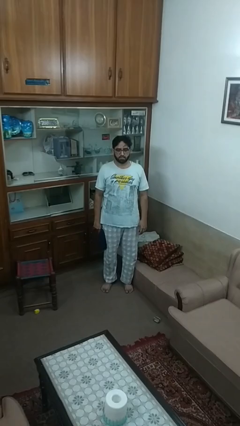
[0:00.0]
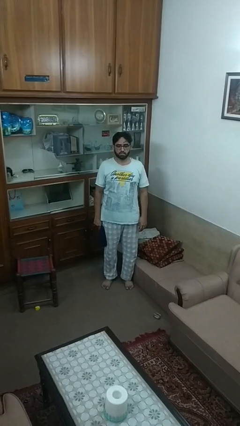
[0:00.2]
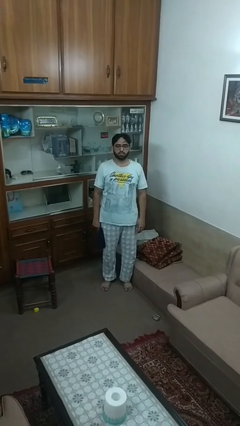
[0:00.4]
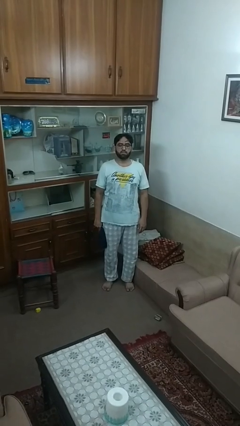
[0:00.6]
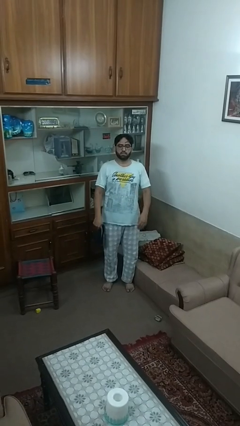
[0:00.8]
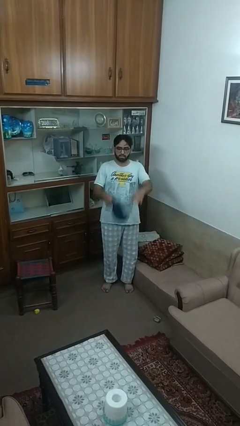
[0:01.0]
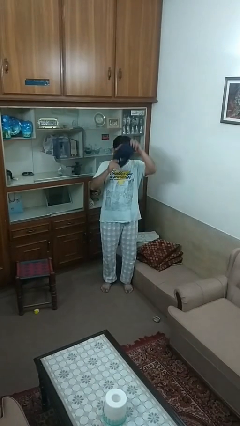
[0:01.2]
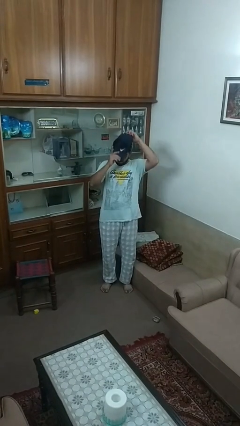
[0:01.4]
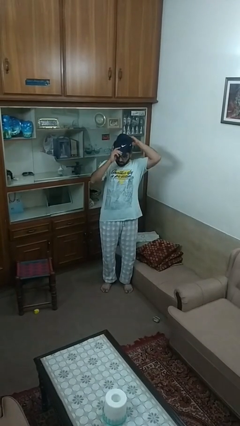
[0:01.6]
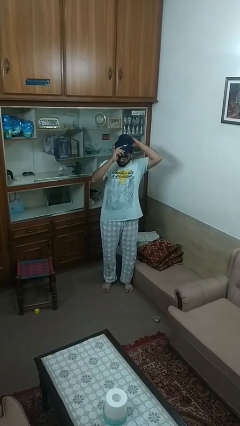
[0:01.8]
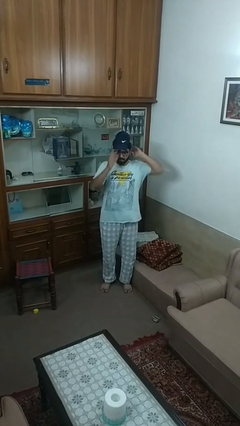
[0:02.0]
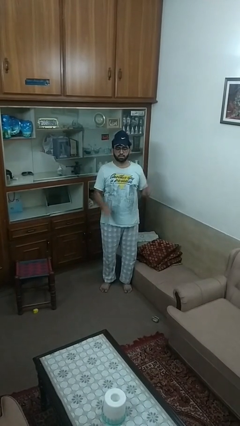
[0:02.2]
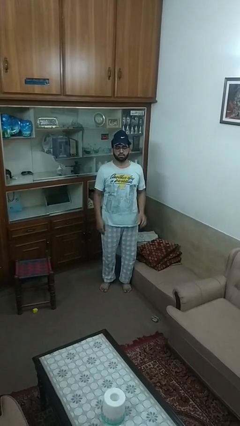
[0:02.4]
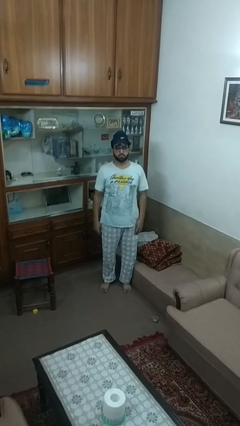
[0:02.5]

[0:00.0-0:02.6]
person puts on hat

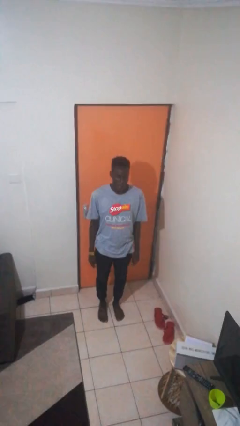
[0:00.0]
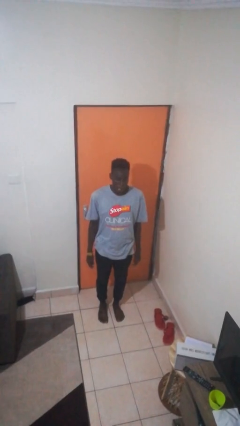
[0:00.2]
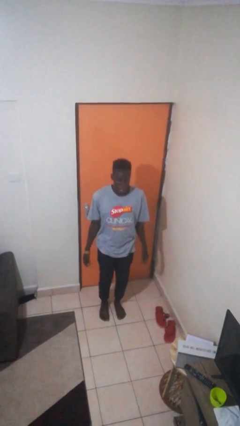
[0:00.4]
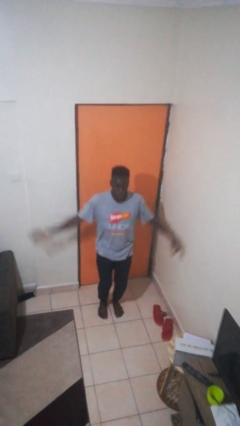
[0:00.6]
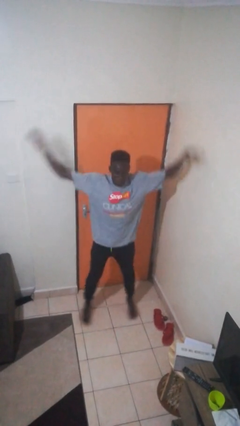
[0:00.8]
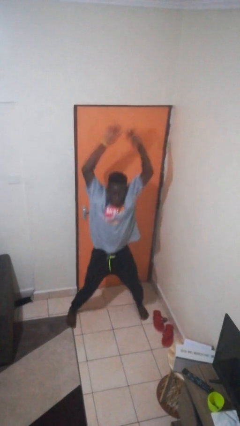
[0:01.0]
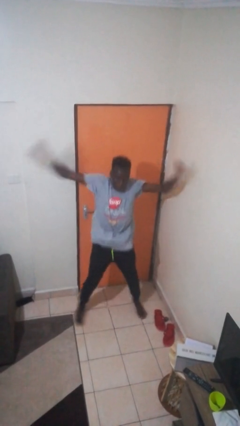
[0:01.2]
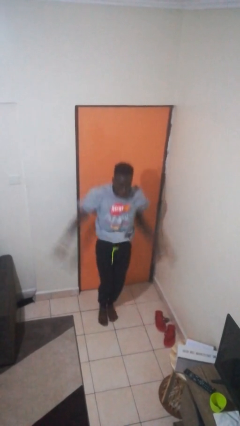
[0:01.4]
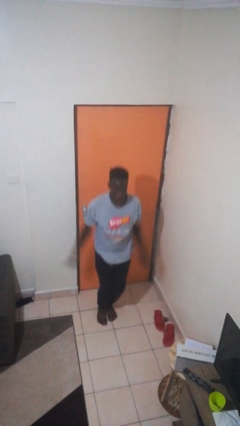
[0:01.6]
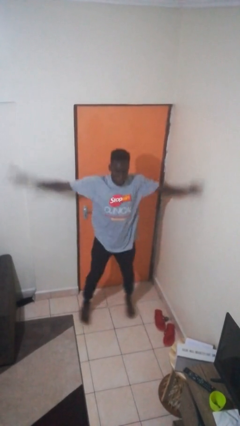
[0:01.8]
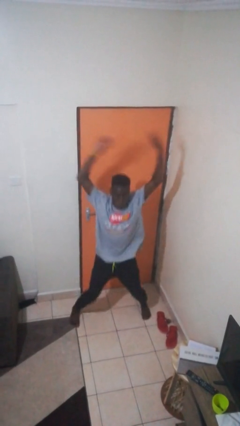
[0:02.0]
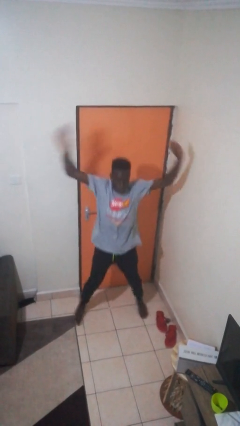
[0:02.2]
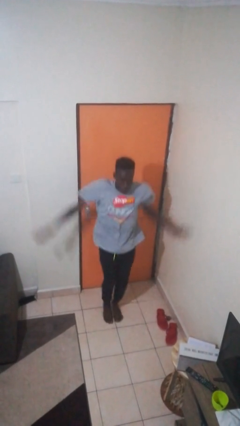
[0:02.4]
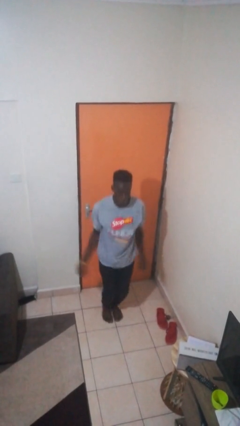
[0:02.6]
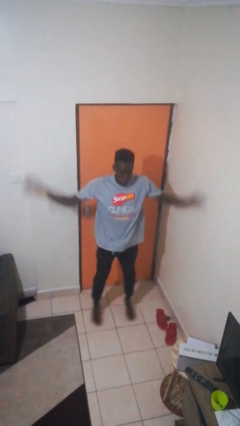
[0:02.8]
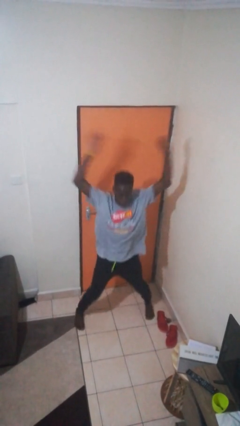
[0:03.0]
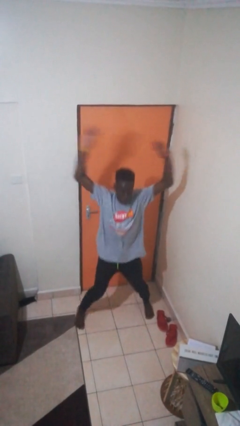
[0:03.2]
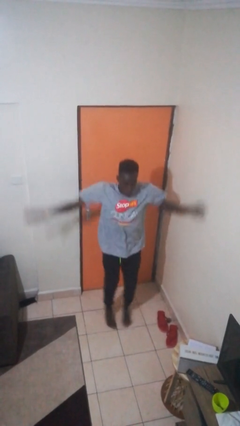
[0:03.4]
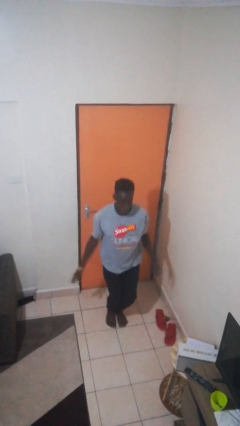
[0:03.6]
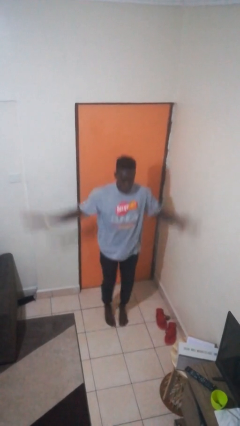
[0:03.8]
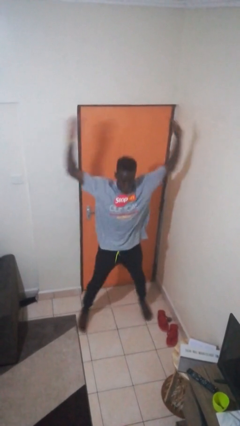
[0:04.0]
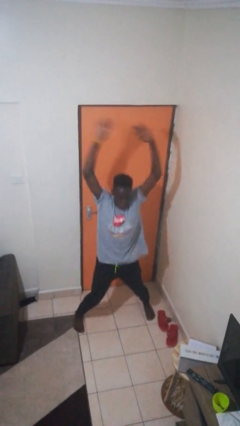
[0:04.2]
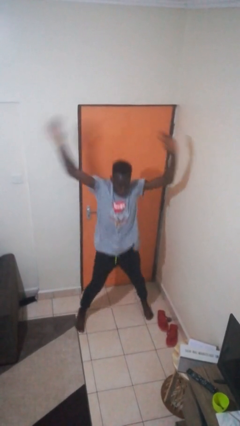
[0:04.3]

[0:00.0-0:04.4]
person exercises with jumping jacks

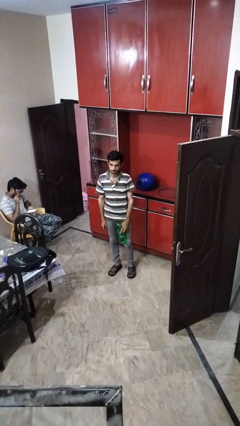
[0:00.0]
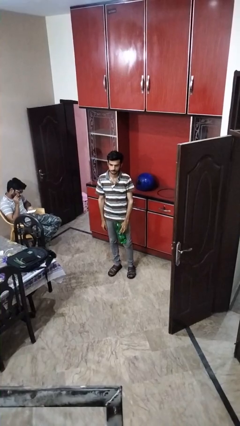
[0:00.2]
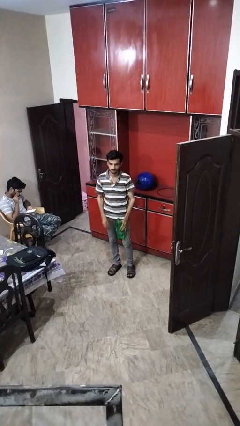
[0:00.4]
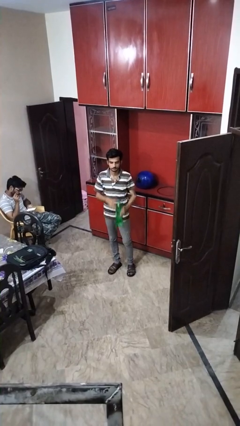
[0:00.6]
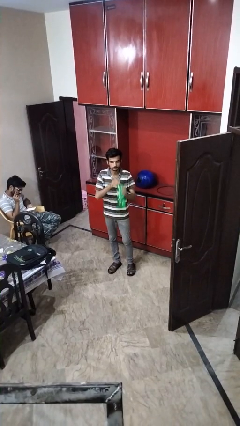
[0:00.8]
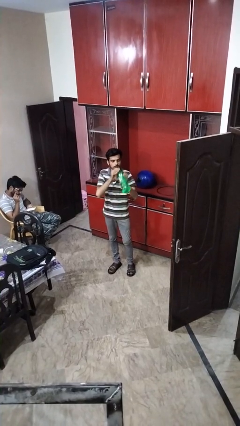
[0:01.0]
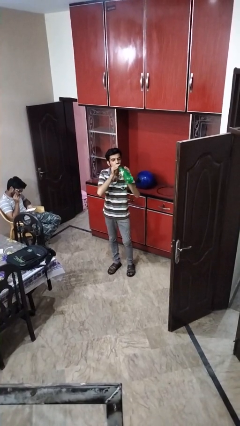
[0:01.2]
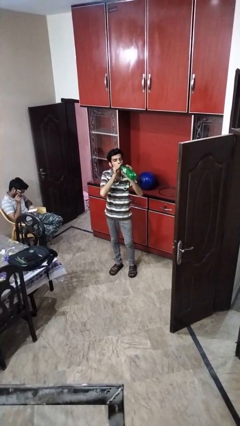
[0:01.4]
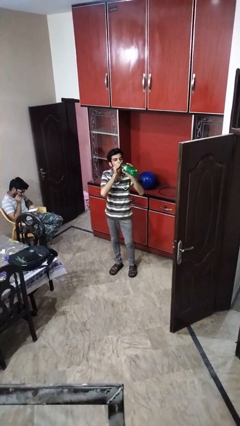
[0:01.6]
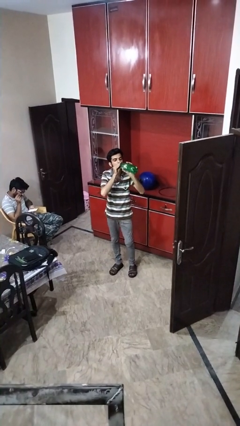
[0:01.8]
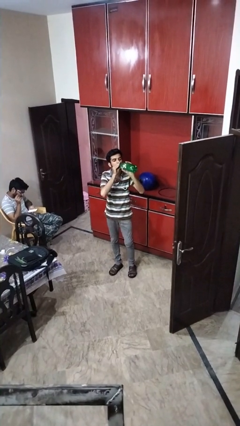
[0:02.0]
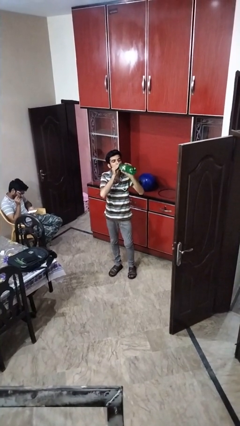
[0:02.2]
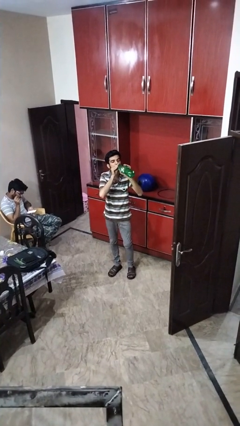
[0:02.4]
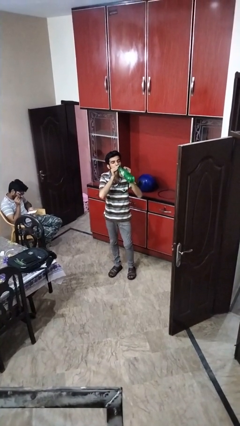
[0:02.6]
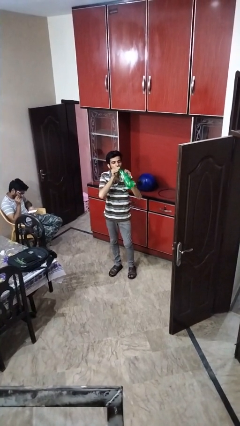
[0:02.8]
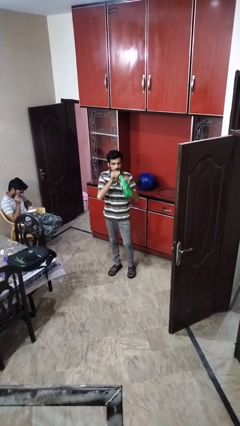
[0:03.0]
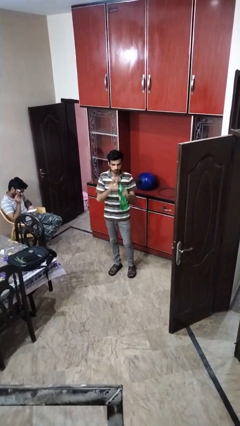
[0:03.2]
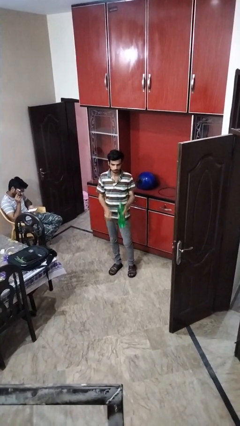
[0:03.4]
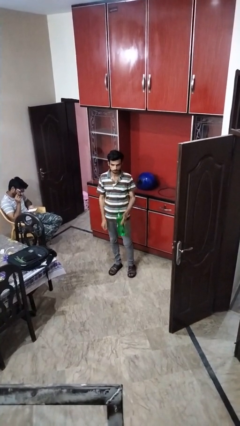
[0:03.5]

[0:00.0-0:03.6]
person drinks from bottle

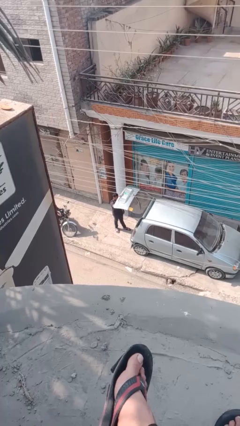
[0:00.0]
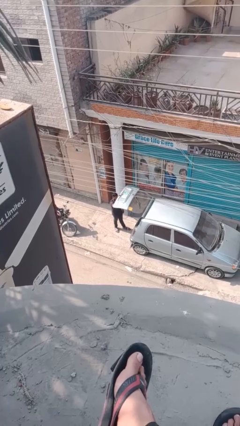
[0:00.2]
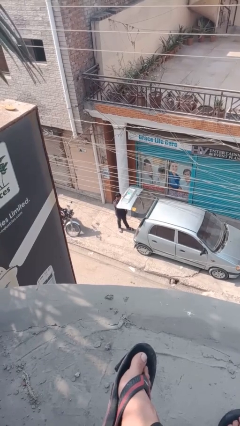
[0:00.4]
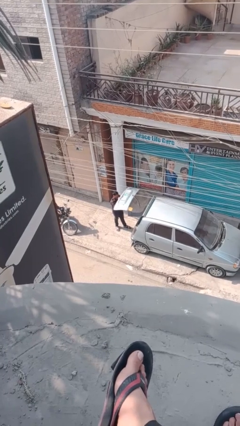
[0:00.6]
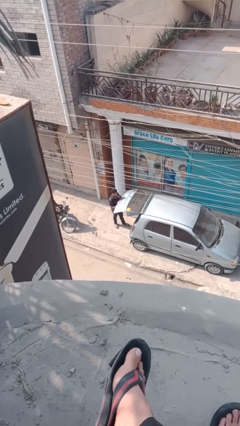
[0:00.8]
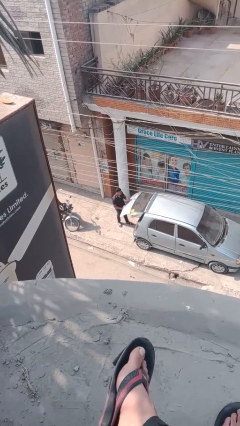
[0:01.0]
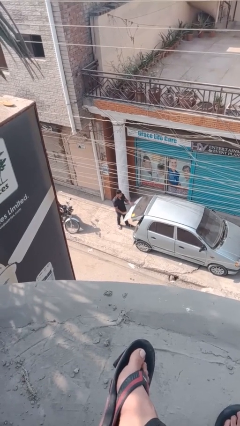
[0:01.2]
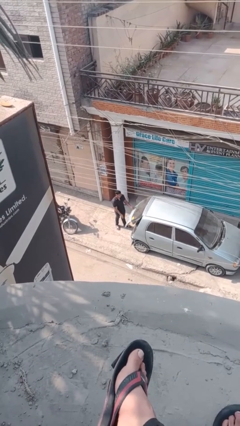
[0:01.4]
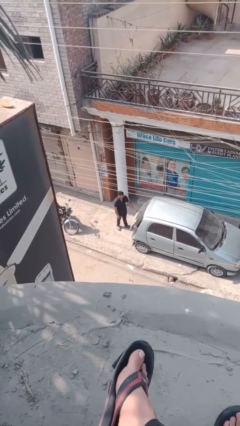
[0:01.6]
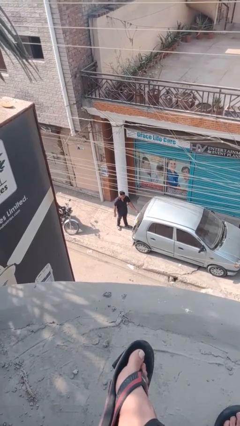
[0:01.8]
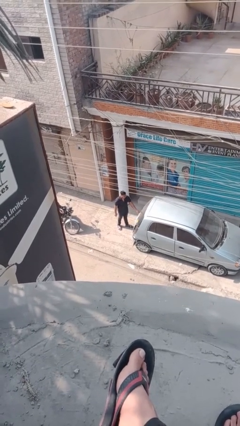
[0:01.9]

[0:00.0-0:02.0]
person closes car trunk

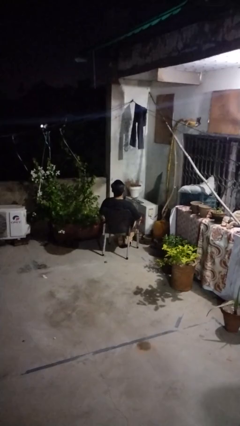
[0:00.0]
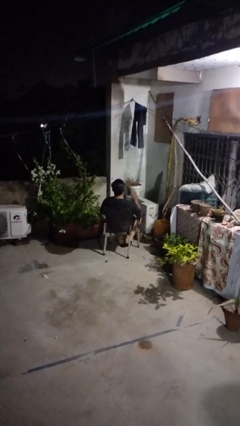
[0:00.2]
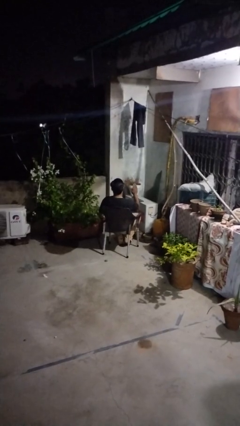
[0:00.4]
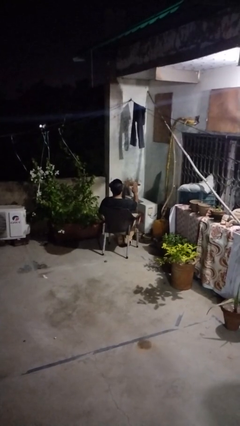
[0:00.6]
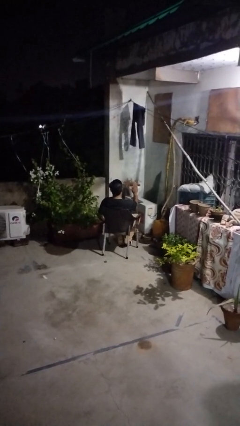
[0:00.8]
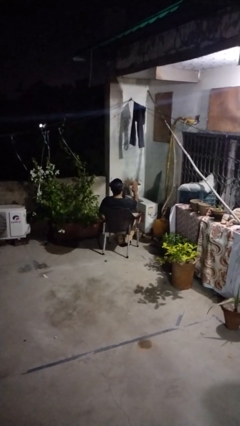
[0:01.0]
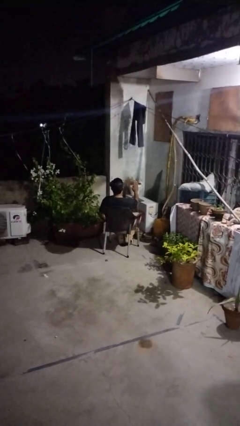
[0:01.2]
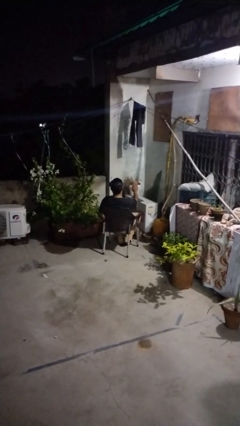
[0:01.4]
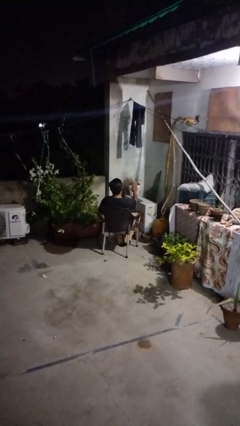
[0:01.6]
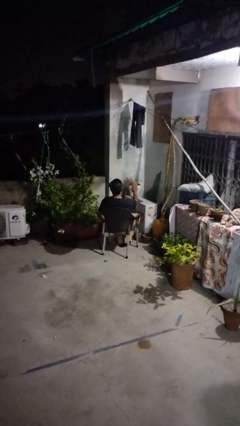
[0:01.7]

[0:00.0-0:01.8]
person gestures stop

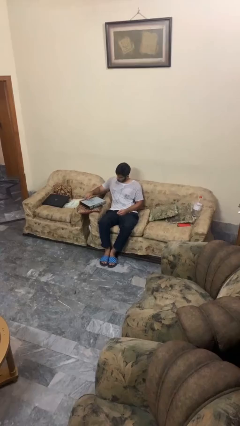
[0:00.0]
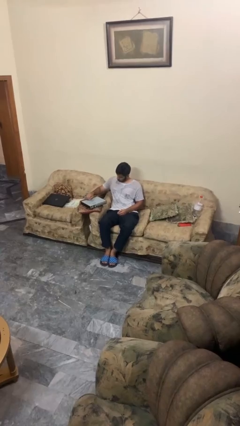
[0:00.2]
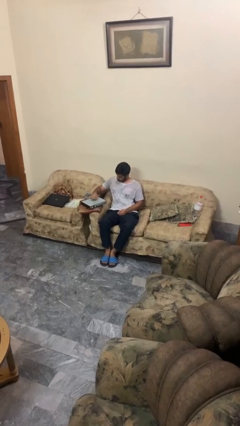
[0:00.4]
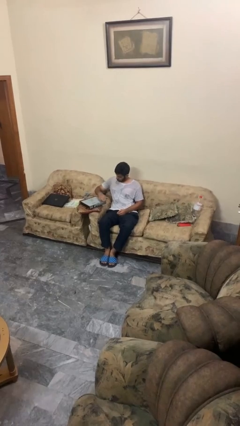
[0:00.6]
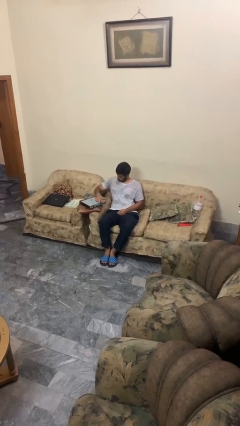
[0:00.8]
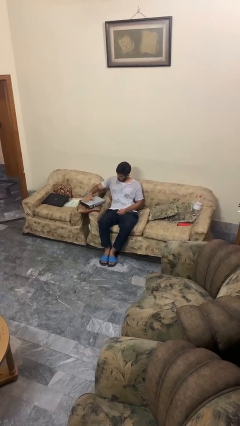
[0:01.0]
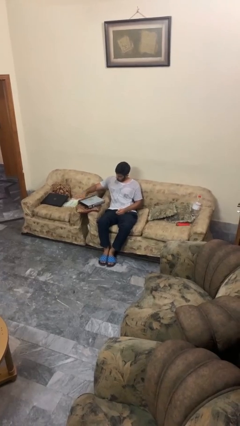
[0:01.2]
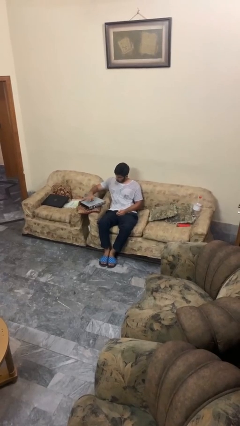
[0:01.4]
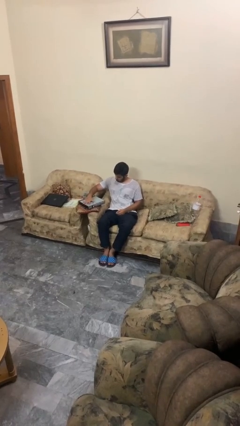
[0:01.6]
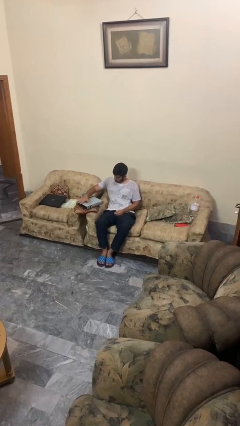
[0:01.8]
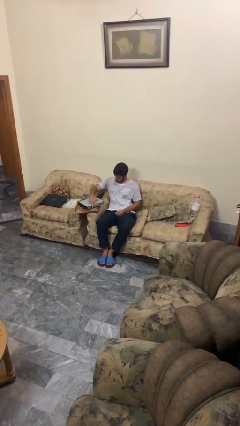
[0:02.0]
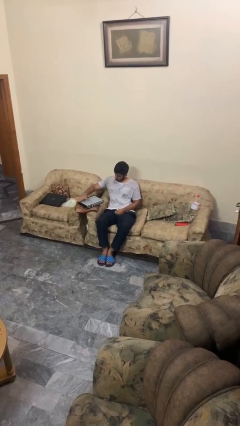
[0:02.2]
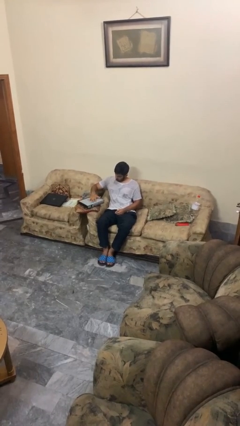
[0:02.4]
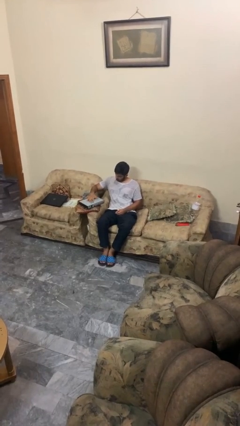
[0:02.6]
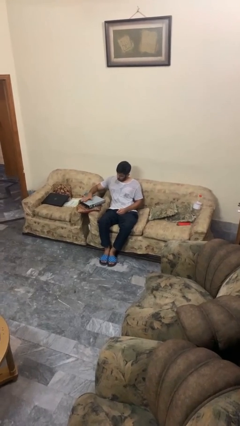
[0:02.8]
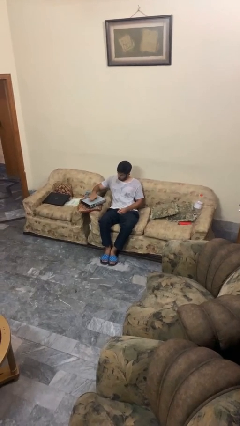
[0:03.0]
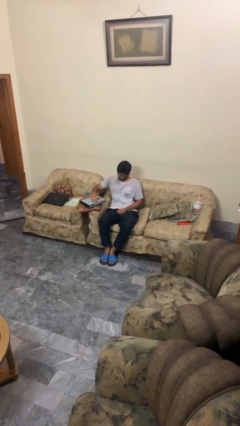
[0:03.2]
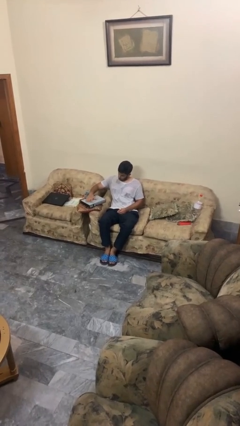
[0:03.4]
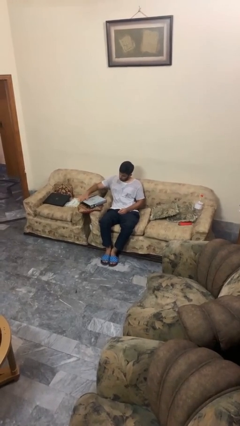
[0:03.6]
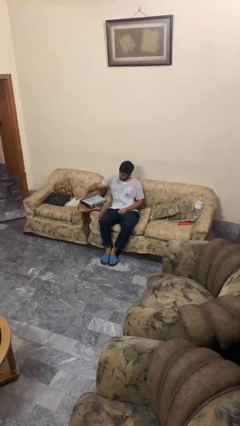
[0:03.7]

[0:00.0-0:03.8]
person waves hand over object
